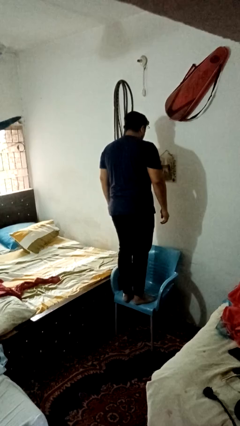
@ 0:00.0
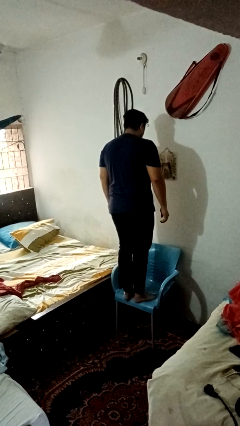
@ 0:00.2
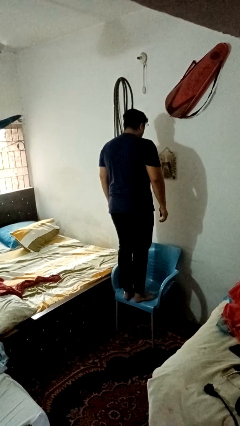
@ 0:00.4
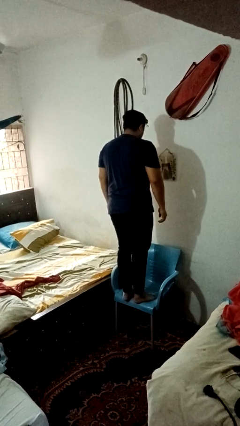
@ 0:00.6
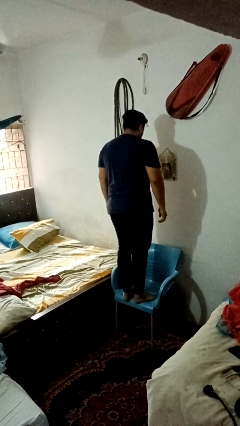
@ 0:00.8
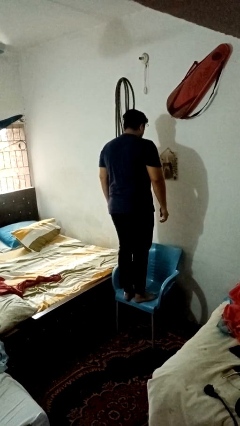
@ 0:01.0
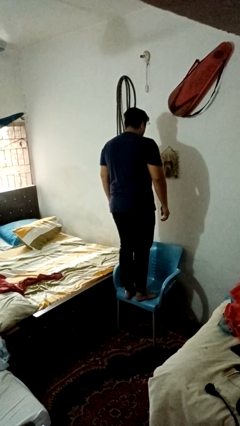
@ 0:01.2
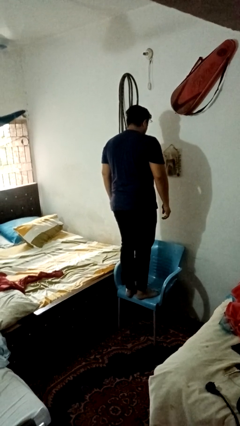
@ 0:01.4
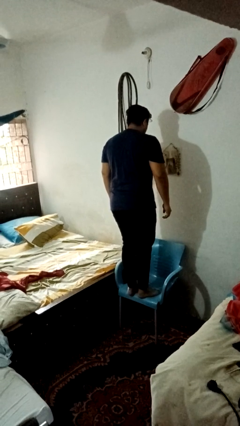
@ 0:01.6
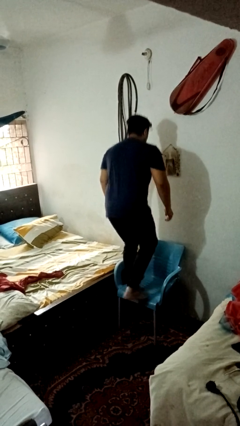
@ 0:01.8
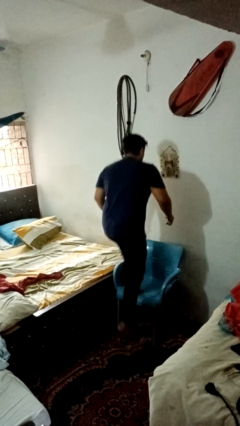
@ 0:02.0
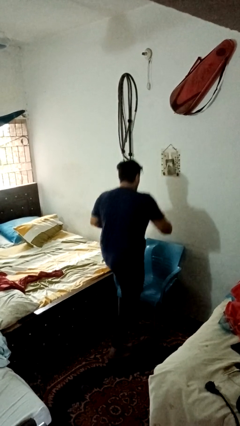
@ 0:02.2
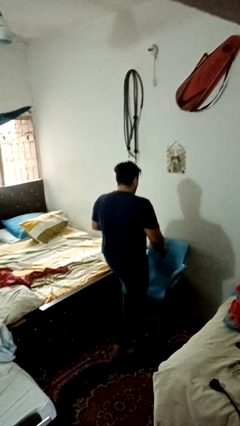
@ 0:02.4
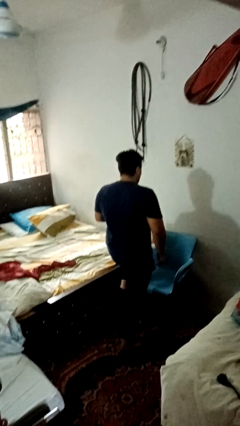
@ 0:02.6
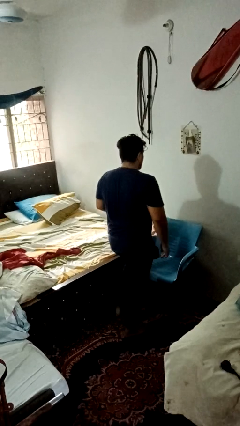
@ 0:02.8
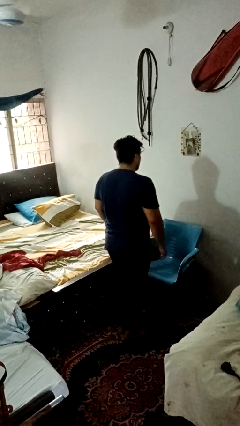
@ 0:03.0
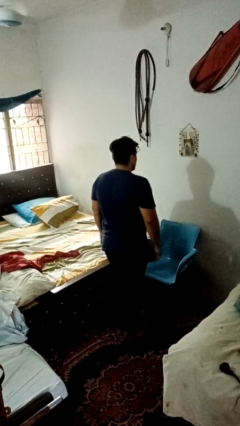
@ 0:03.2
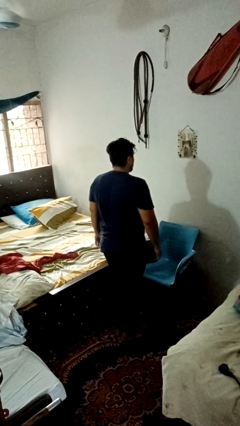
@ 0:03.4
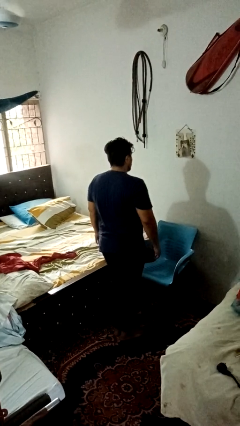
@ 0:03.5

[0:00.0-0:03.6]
person climbs off chair

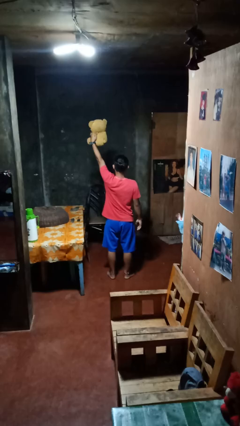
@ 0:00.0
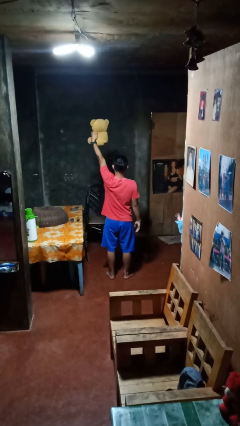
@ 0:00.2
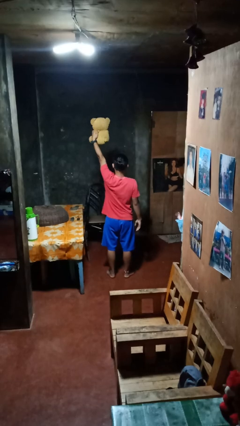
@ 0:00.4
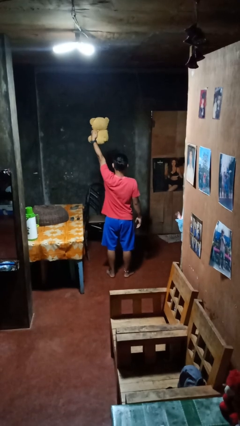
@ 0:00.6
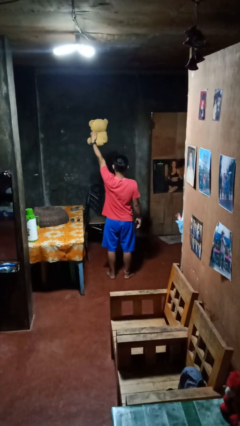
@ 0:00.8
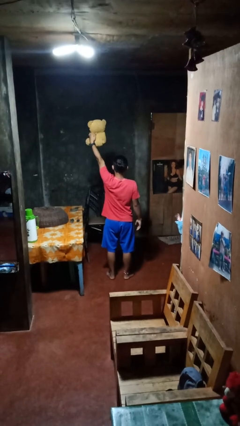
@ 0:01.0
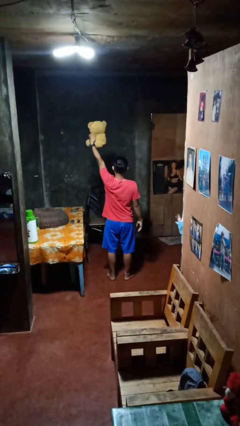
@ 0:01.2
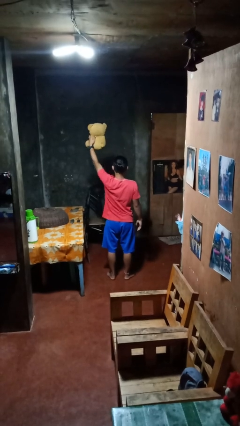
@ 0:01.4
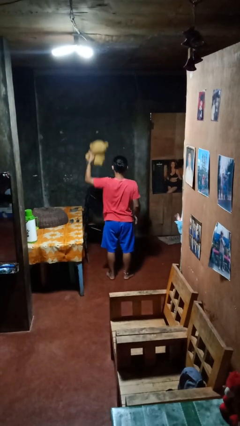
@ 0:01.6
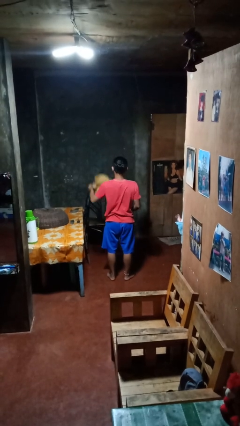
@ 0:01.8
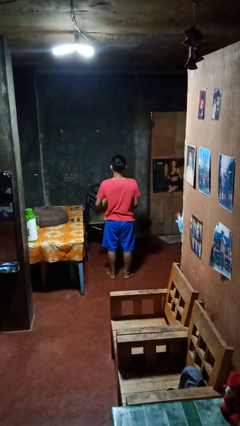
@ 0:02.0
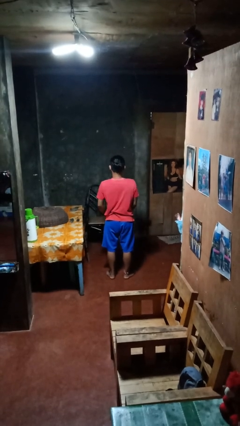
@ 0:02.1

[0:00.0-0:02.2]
person holds object above head

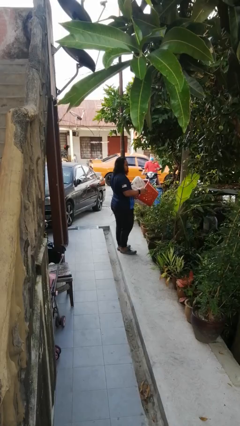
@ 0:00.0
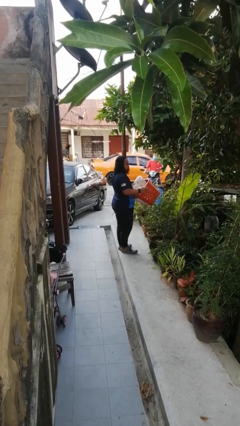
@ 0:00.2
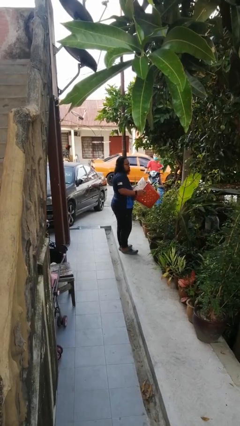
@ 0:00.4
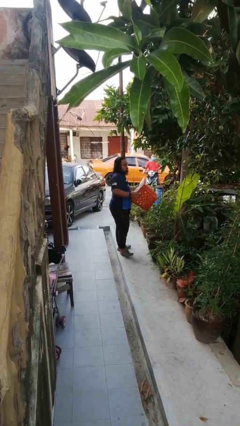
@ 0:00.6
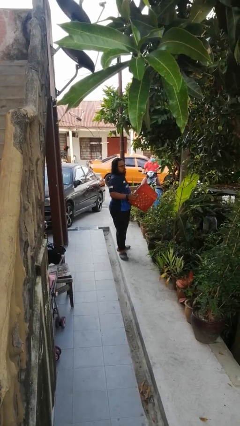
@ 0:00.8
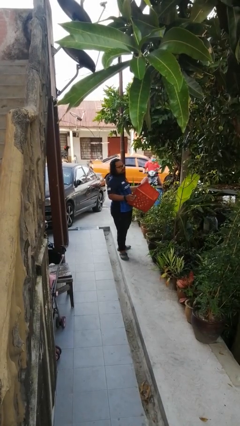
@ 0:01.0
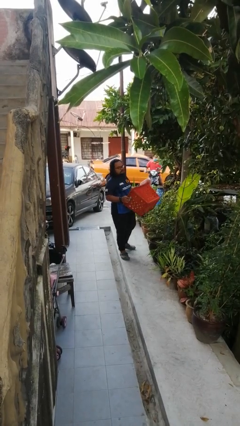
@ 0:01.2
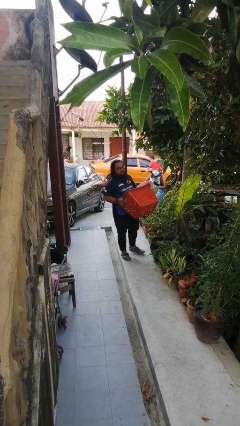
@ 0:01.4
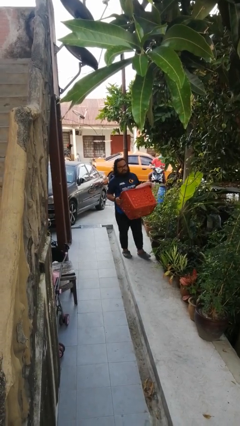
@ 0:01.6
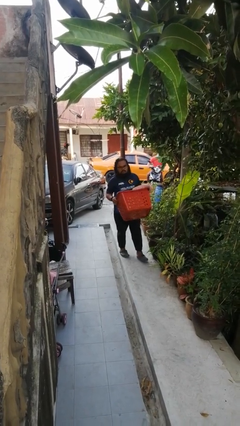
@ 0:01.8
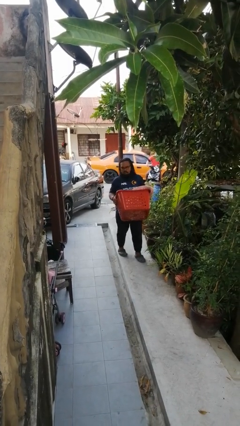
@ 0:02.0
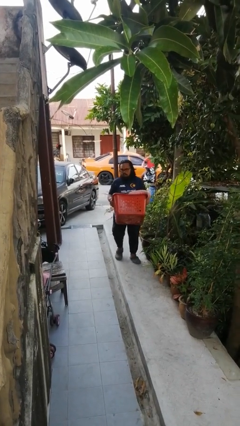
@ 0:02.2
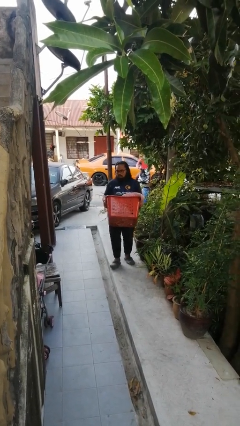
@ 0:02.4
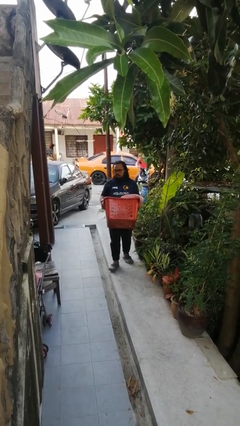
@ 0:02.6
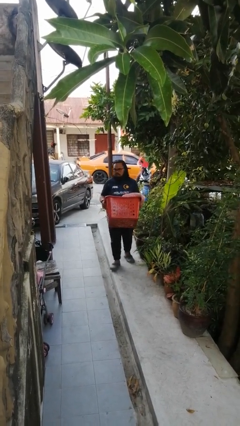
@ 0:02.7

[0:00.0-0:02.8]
person carries laundry basket

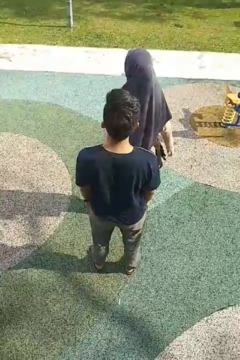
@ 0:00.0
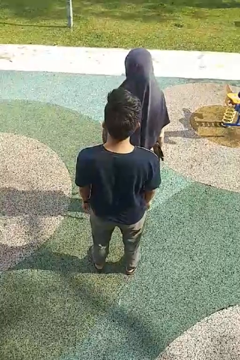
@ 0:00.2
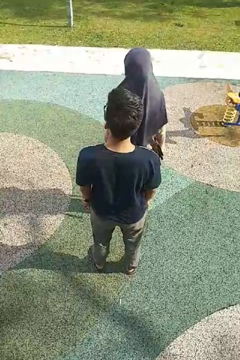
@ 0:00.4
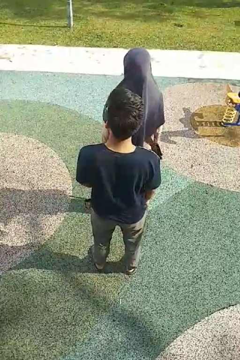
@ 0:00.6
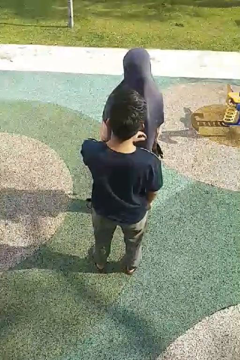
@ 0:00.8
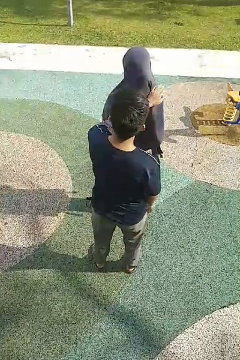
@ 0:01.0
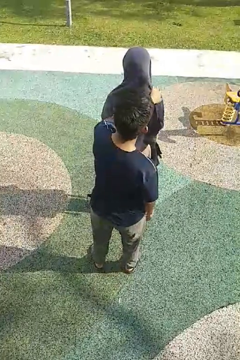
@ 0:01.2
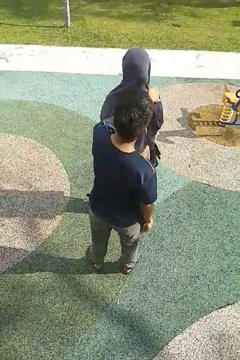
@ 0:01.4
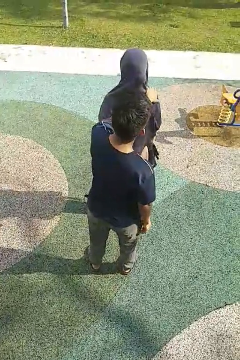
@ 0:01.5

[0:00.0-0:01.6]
person grabs person by shoulder

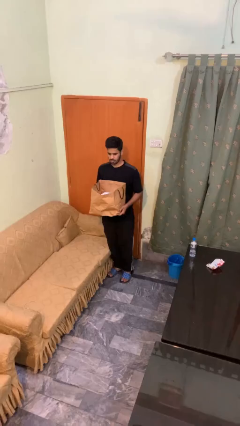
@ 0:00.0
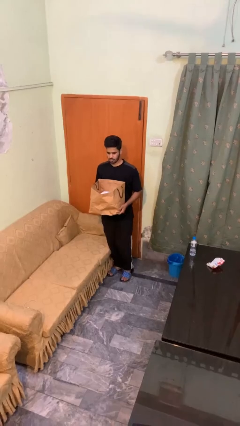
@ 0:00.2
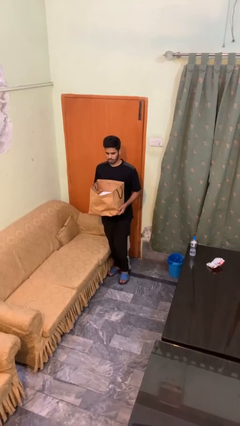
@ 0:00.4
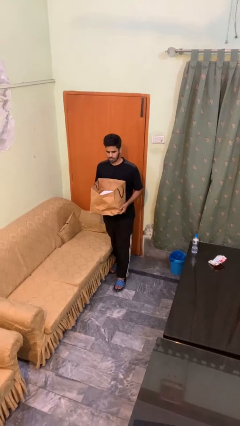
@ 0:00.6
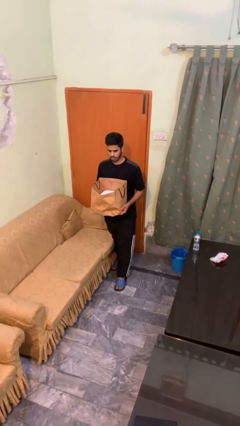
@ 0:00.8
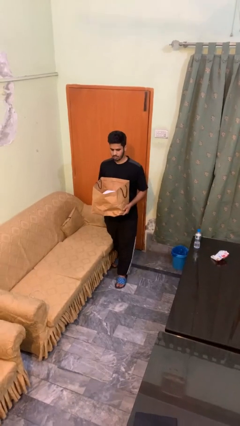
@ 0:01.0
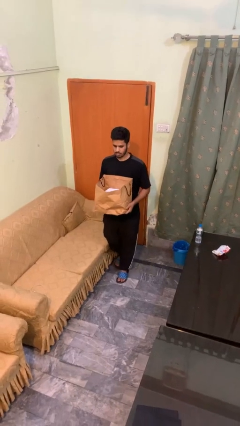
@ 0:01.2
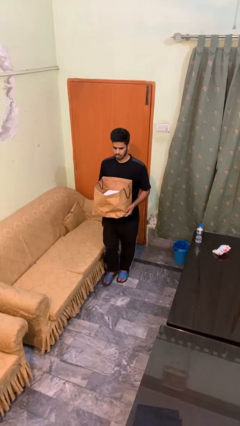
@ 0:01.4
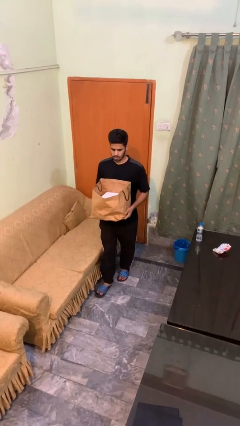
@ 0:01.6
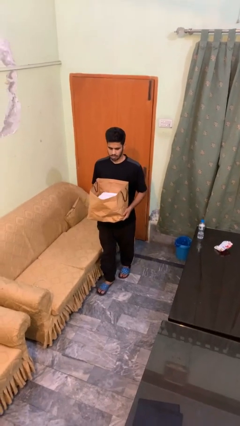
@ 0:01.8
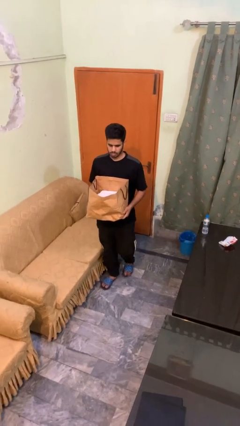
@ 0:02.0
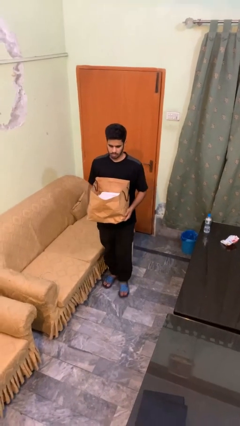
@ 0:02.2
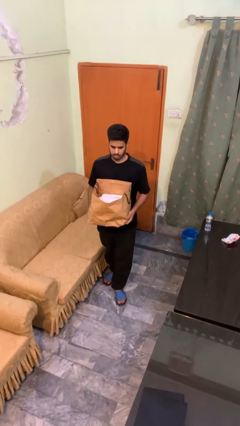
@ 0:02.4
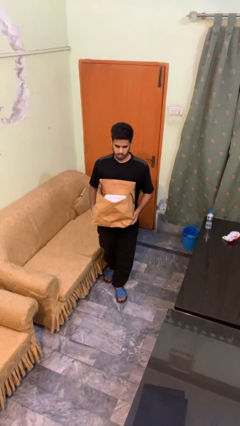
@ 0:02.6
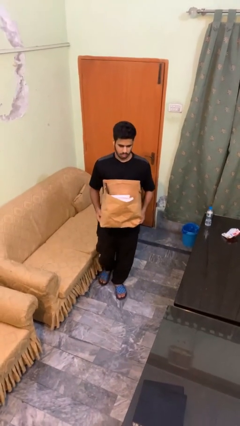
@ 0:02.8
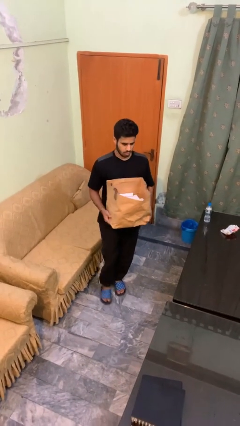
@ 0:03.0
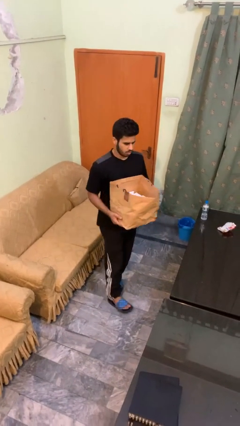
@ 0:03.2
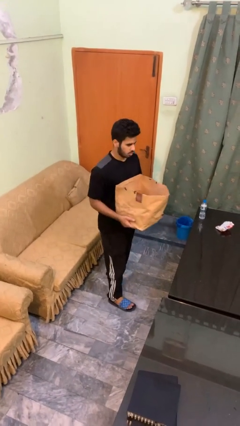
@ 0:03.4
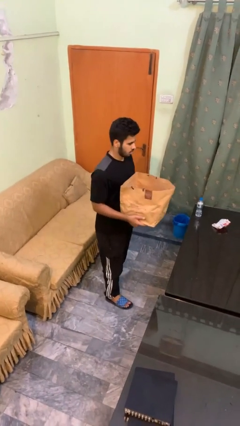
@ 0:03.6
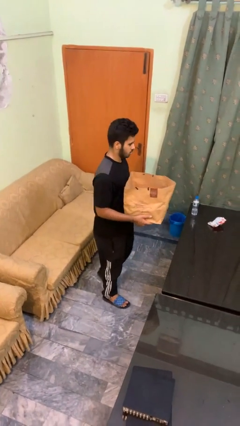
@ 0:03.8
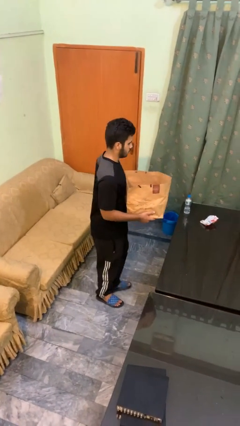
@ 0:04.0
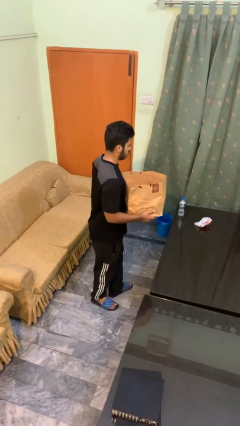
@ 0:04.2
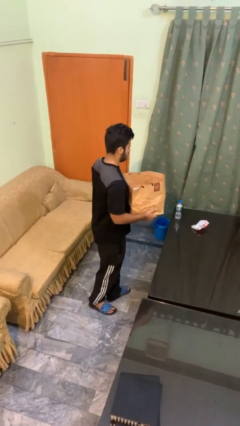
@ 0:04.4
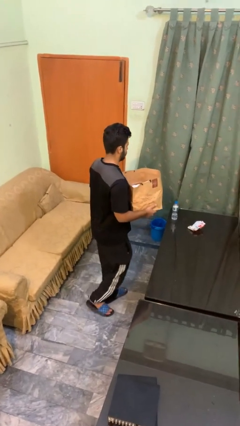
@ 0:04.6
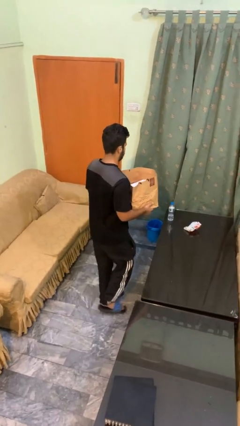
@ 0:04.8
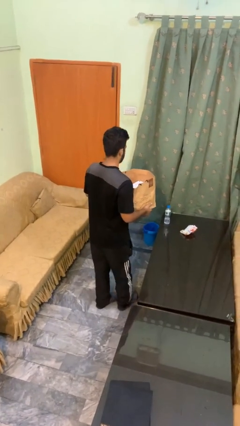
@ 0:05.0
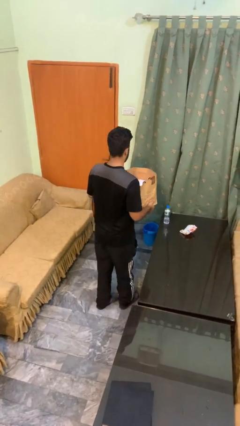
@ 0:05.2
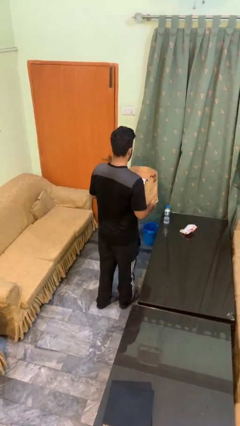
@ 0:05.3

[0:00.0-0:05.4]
person carries groceries

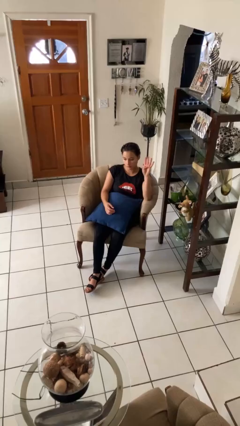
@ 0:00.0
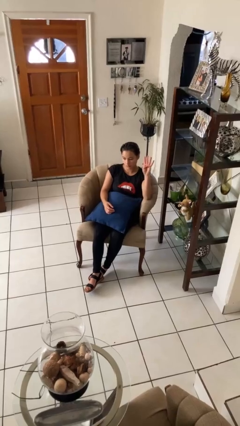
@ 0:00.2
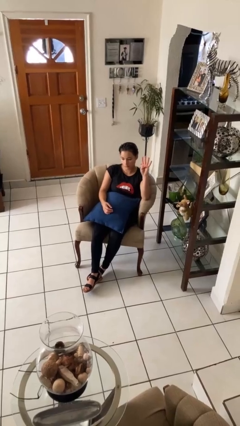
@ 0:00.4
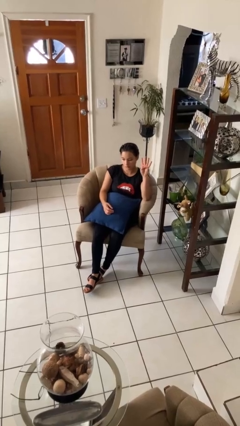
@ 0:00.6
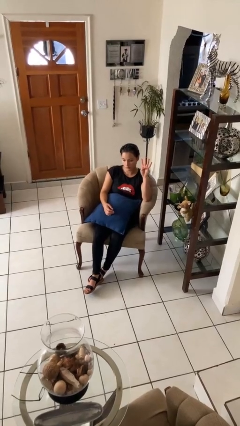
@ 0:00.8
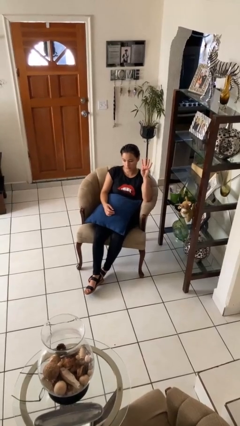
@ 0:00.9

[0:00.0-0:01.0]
person gestures number four

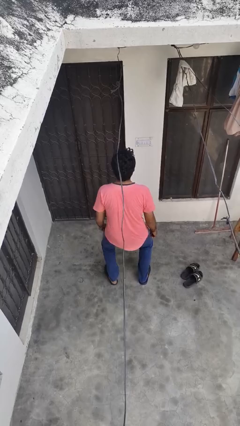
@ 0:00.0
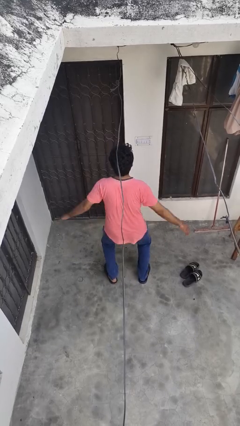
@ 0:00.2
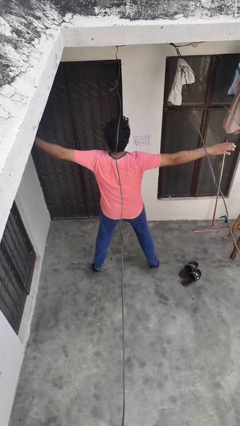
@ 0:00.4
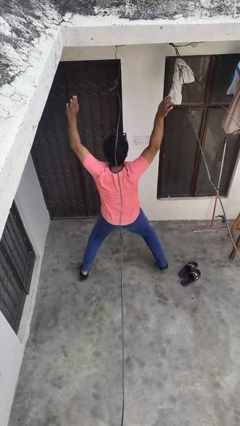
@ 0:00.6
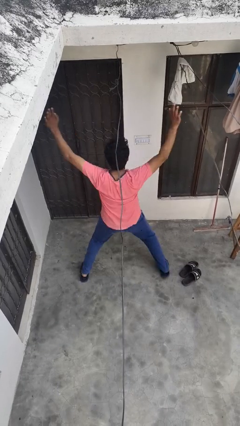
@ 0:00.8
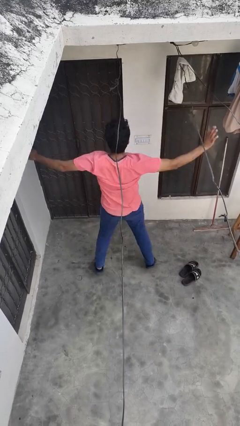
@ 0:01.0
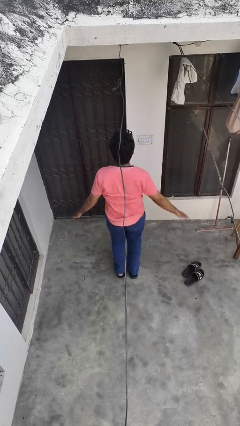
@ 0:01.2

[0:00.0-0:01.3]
person exercises with jumping jacks
